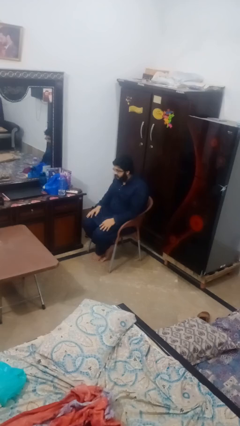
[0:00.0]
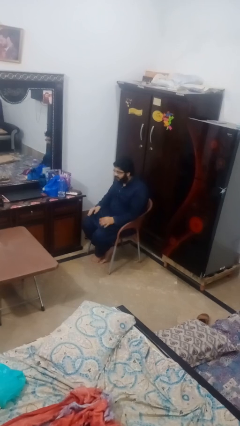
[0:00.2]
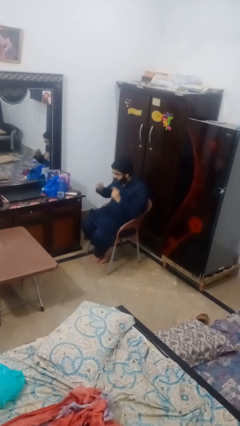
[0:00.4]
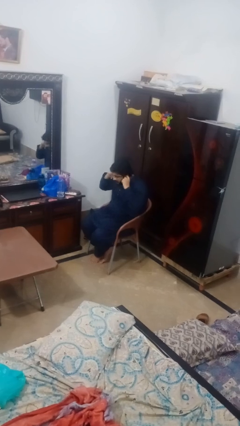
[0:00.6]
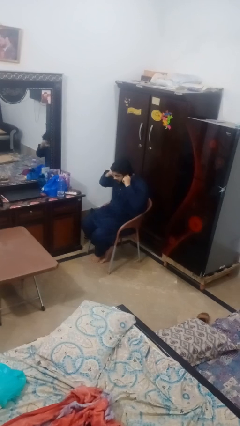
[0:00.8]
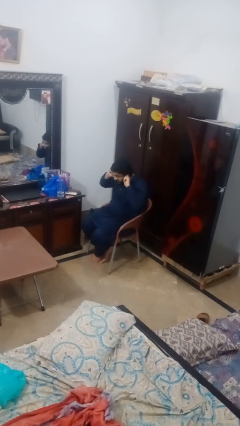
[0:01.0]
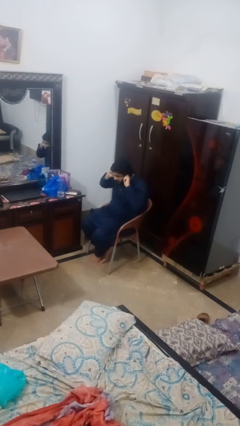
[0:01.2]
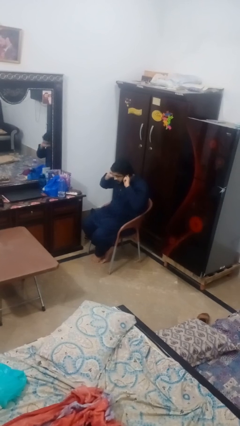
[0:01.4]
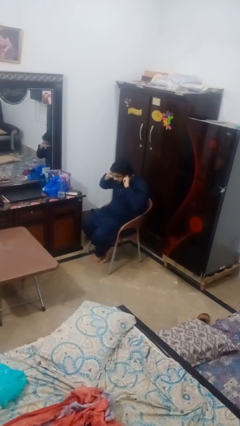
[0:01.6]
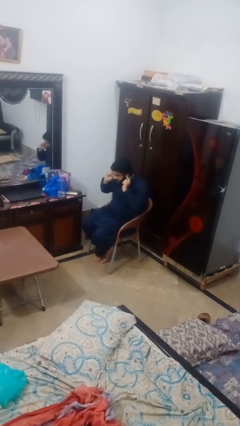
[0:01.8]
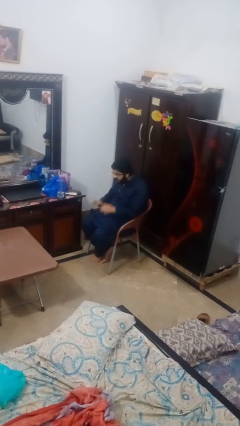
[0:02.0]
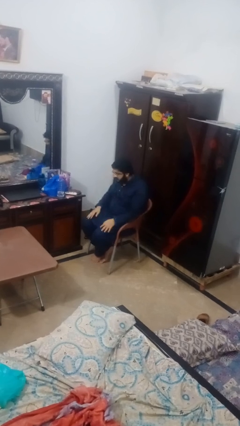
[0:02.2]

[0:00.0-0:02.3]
person puts fingers in ear

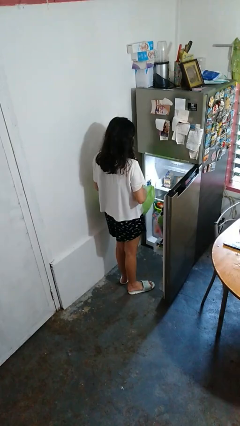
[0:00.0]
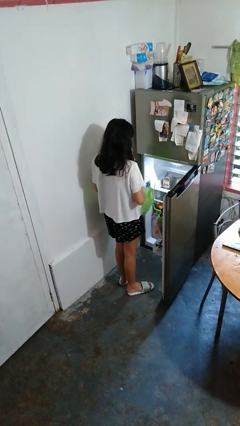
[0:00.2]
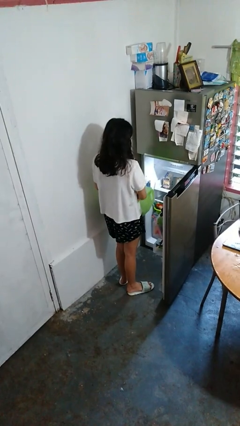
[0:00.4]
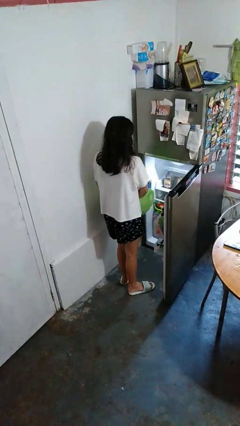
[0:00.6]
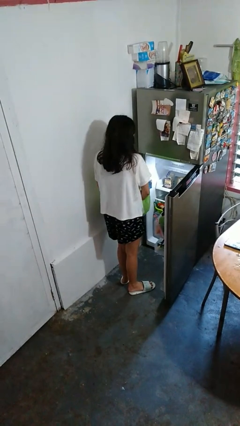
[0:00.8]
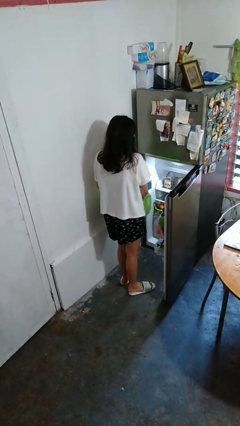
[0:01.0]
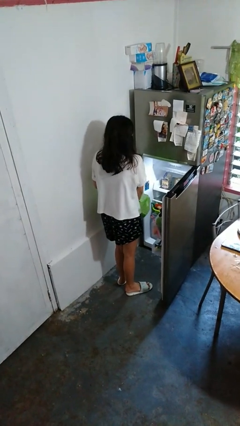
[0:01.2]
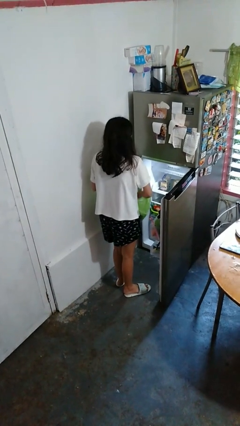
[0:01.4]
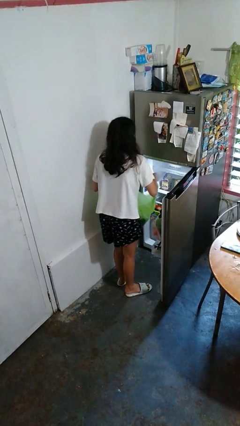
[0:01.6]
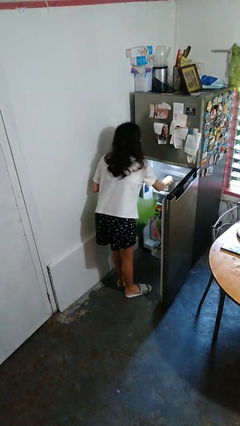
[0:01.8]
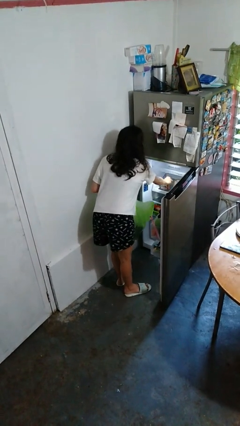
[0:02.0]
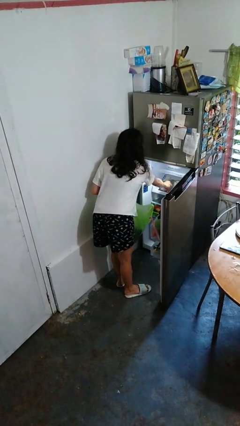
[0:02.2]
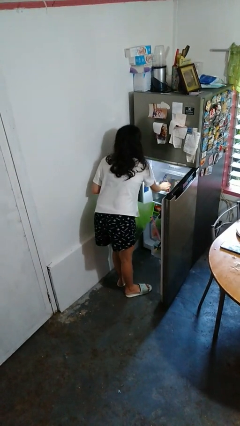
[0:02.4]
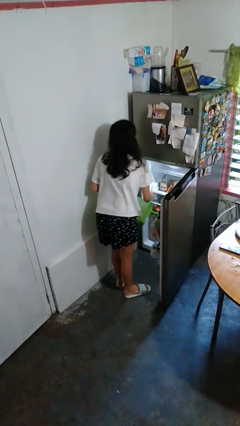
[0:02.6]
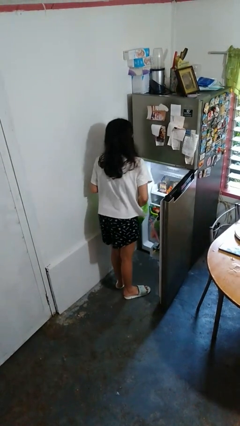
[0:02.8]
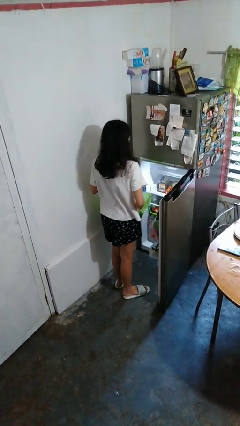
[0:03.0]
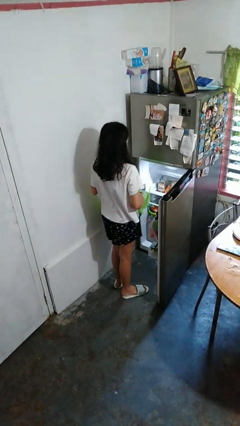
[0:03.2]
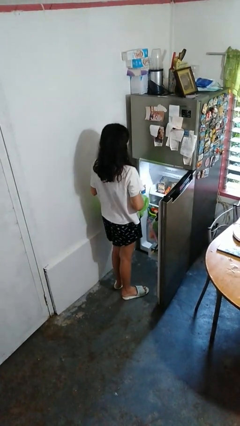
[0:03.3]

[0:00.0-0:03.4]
person loads groceries into refrigerator

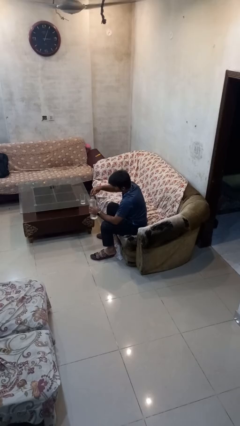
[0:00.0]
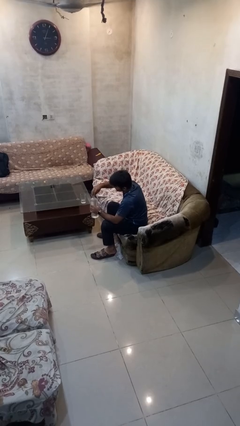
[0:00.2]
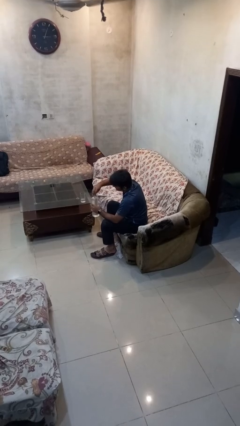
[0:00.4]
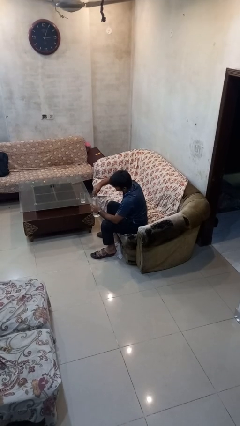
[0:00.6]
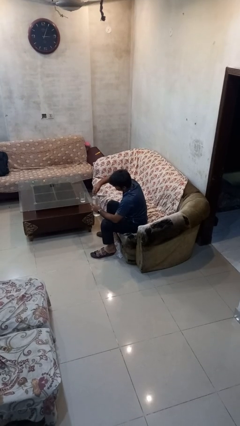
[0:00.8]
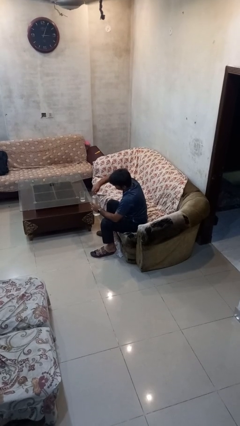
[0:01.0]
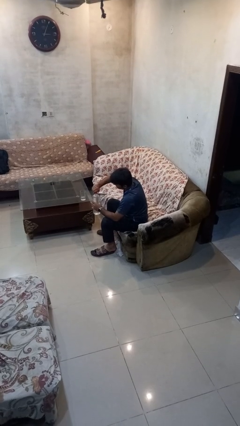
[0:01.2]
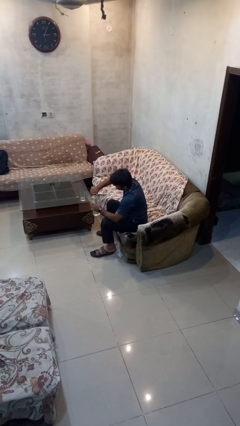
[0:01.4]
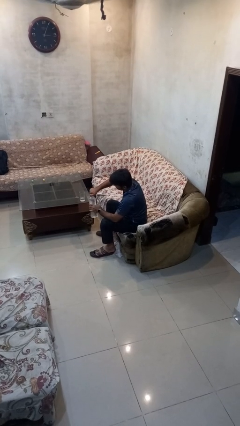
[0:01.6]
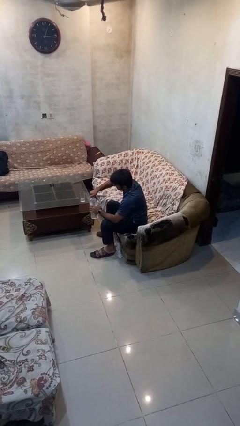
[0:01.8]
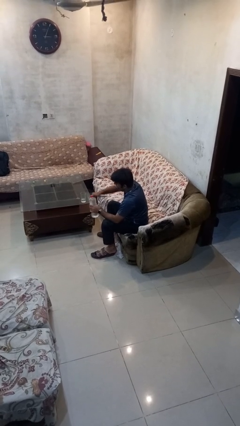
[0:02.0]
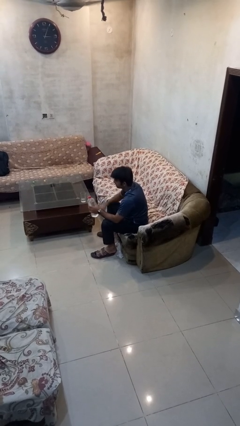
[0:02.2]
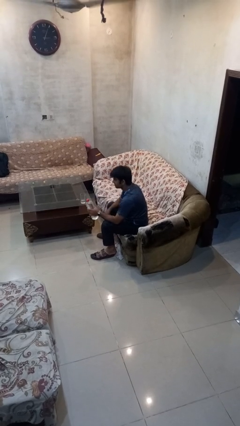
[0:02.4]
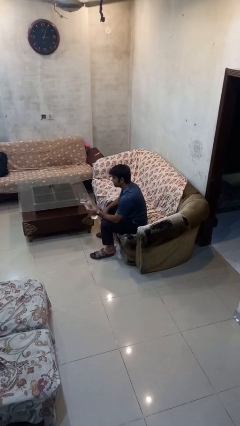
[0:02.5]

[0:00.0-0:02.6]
person screws lid to bottle

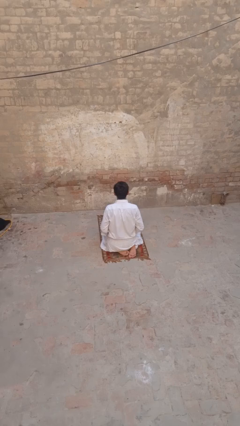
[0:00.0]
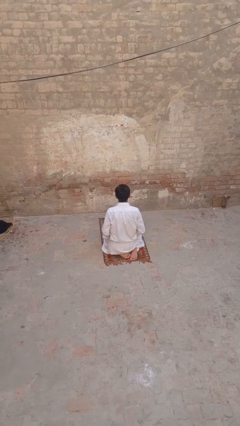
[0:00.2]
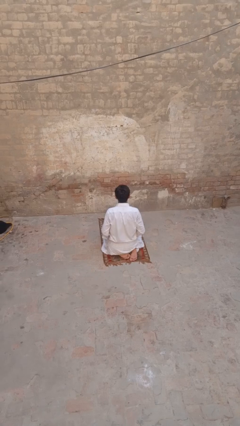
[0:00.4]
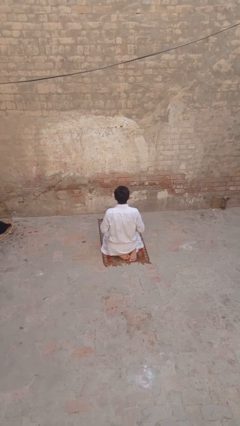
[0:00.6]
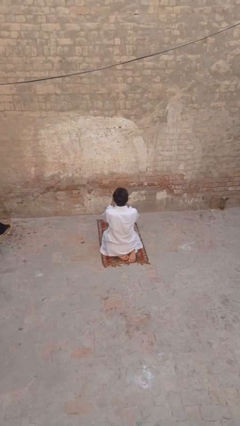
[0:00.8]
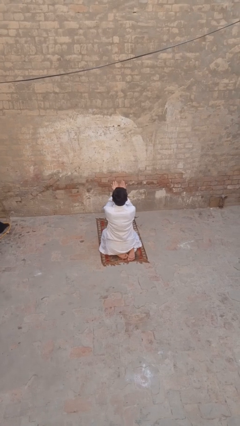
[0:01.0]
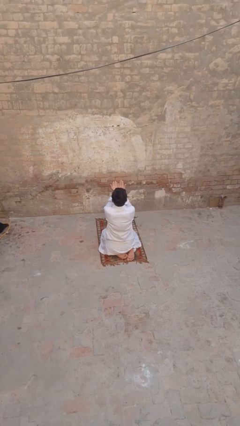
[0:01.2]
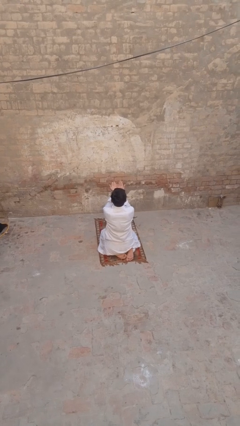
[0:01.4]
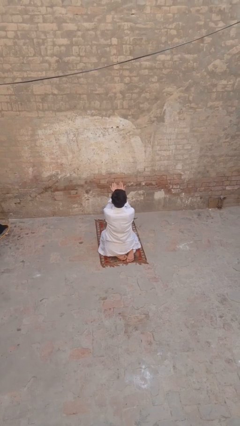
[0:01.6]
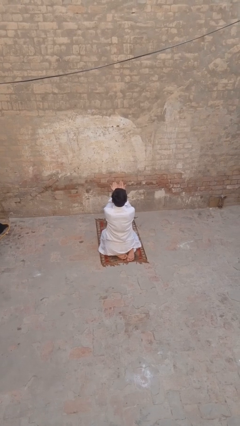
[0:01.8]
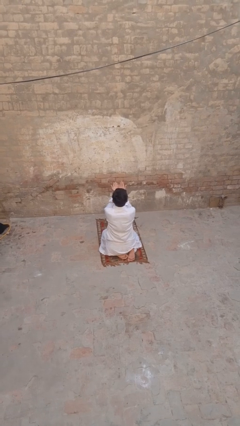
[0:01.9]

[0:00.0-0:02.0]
person prays

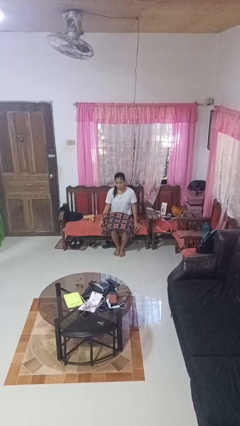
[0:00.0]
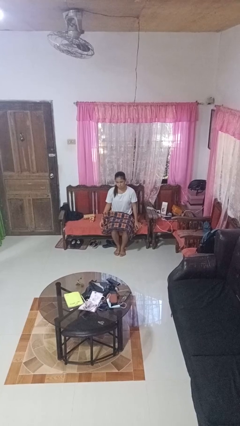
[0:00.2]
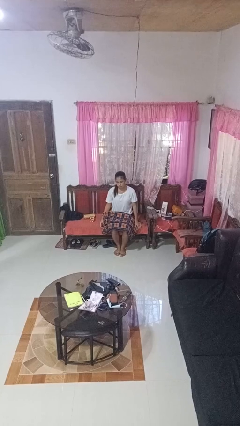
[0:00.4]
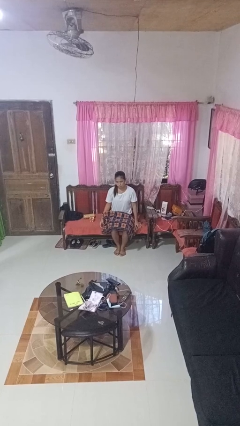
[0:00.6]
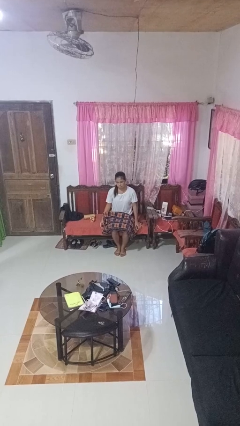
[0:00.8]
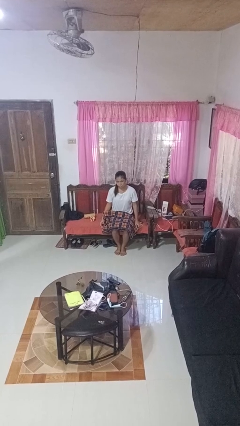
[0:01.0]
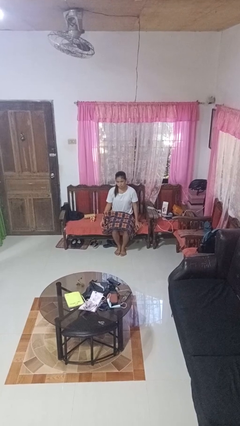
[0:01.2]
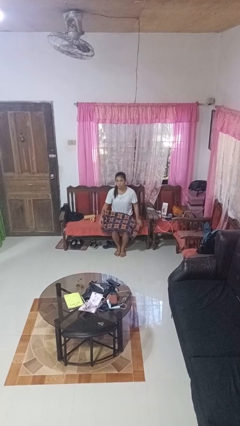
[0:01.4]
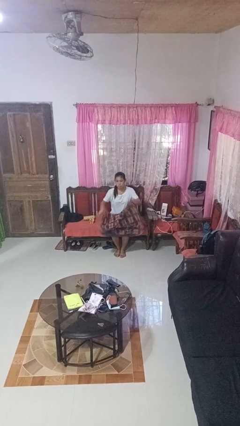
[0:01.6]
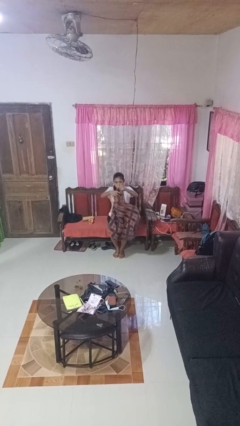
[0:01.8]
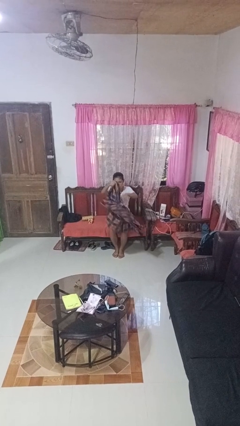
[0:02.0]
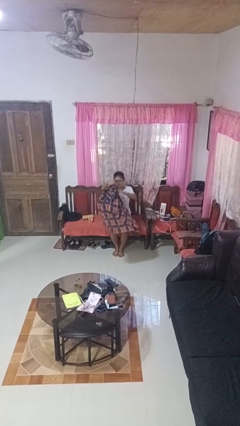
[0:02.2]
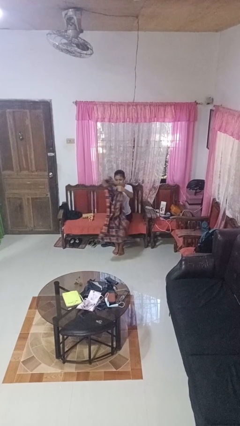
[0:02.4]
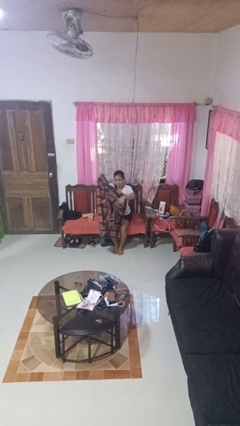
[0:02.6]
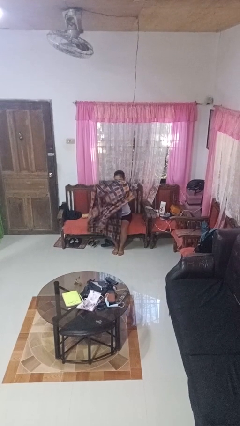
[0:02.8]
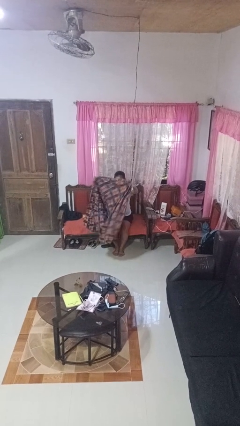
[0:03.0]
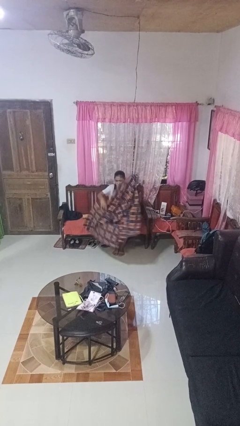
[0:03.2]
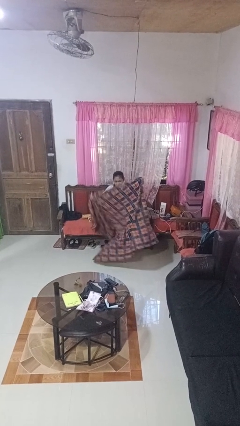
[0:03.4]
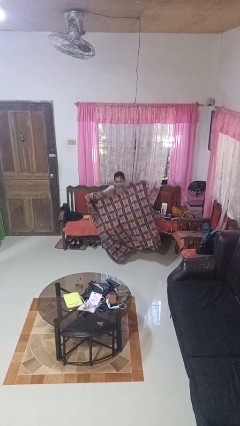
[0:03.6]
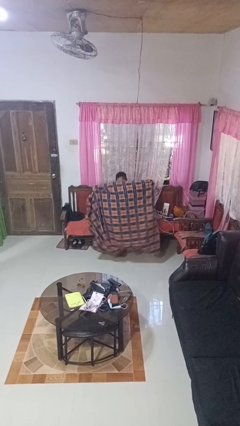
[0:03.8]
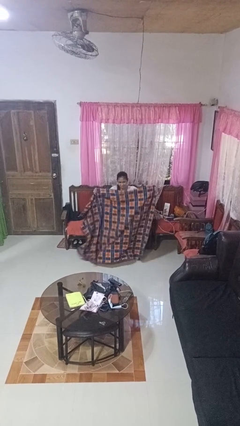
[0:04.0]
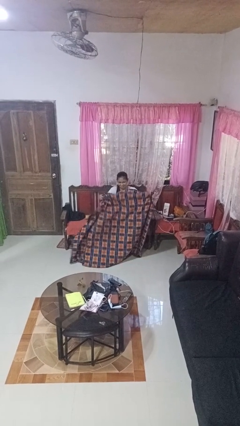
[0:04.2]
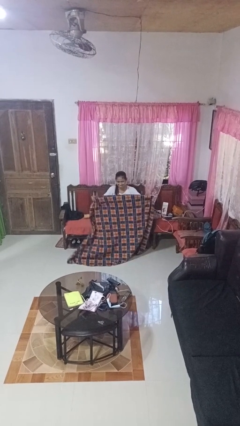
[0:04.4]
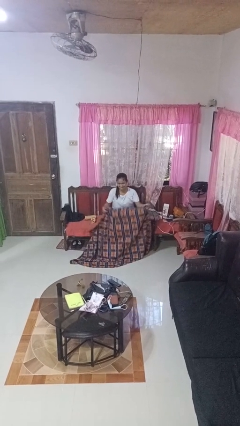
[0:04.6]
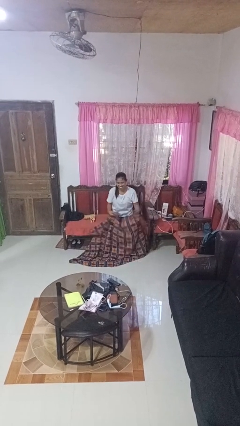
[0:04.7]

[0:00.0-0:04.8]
person unfolds blanket

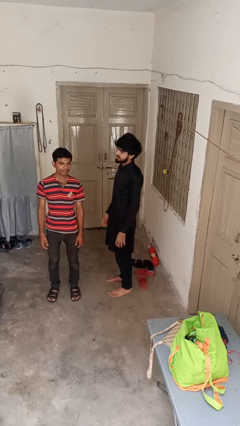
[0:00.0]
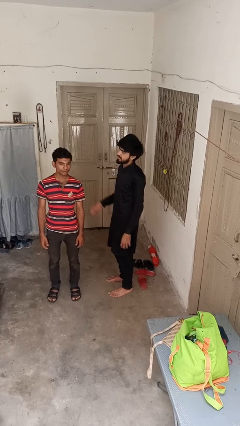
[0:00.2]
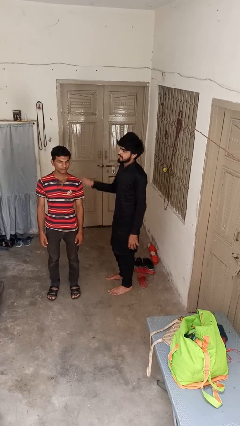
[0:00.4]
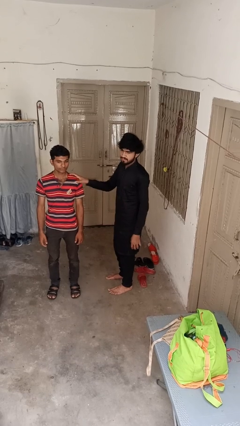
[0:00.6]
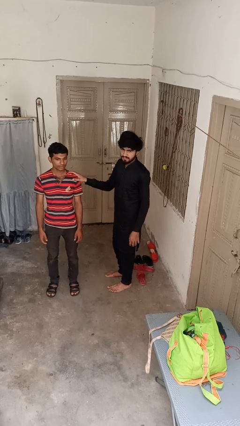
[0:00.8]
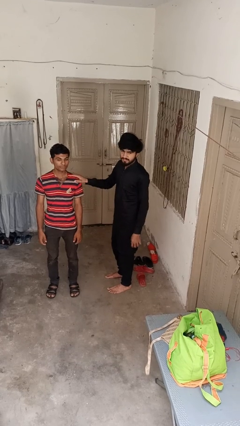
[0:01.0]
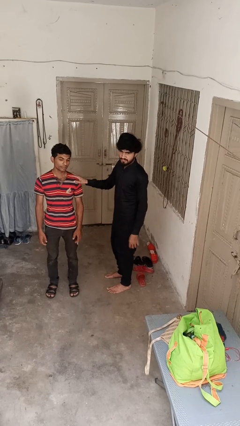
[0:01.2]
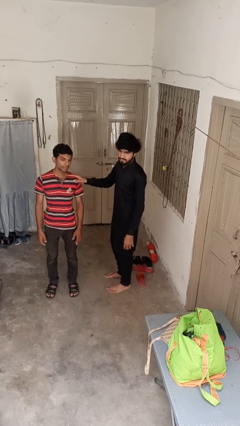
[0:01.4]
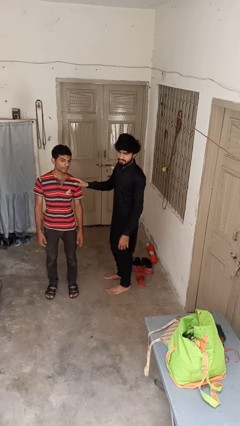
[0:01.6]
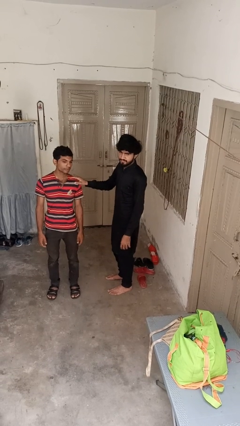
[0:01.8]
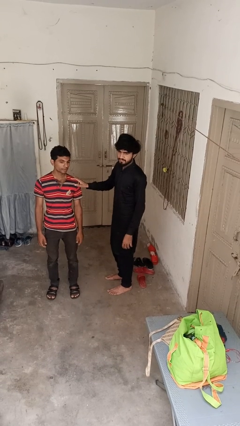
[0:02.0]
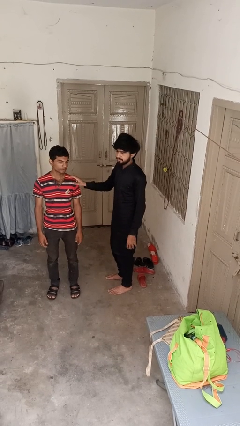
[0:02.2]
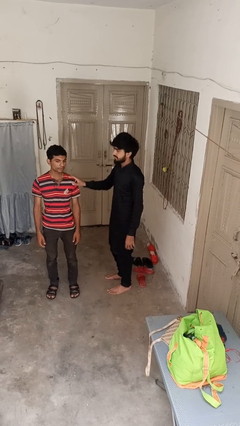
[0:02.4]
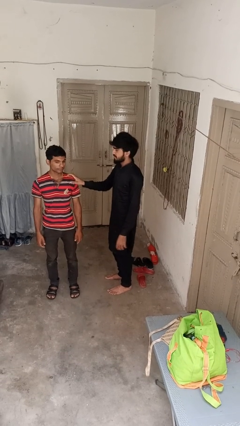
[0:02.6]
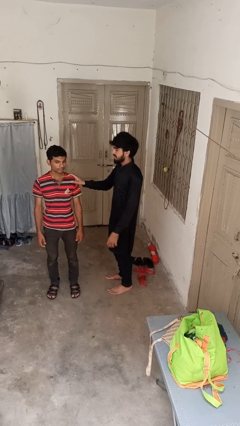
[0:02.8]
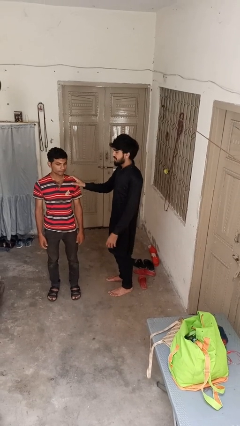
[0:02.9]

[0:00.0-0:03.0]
person grabs person by shoulder
